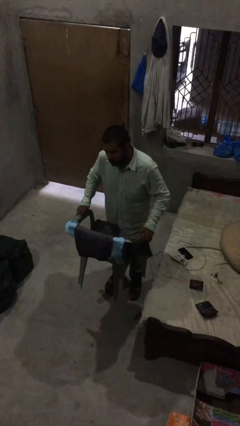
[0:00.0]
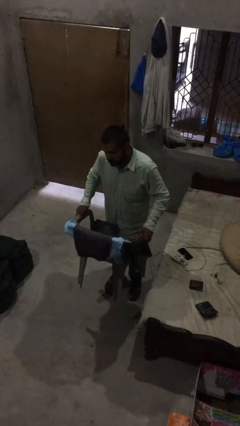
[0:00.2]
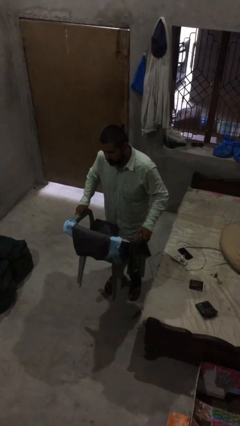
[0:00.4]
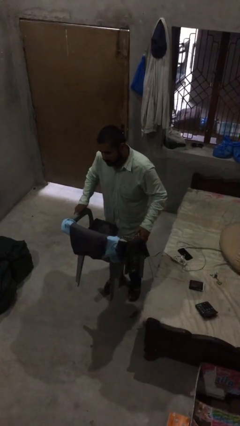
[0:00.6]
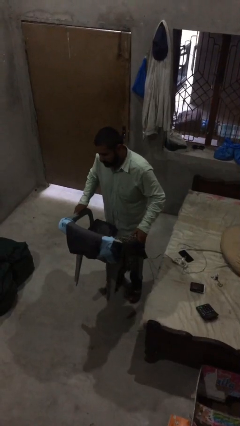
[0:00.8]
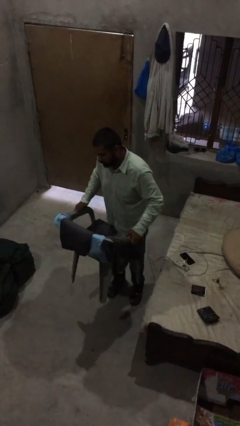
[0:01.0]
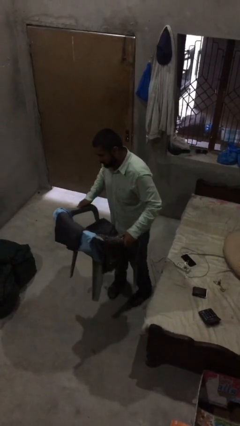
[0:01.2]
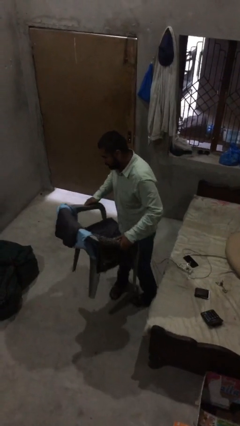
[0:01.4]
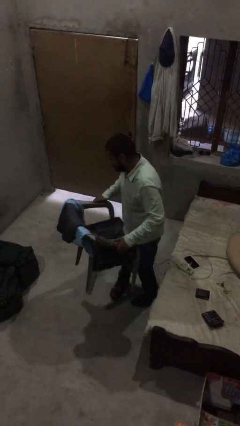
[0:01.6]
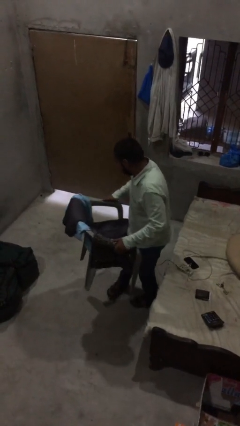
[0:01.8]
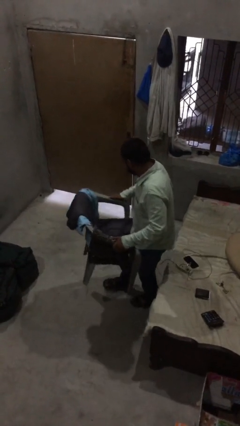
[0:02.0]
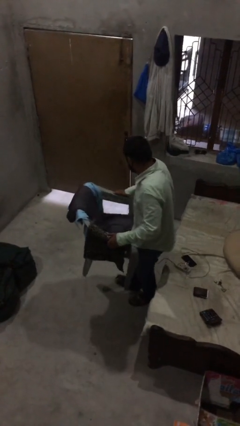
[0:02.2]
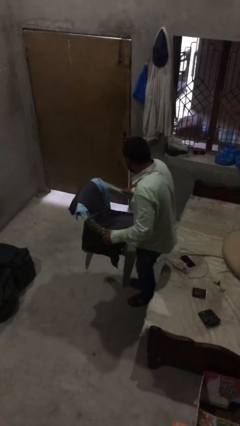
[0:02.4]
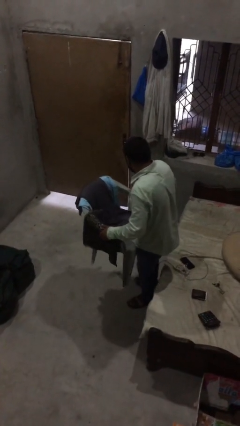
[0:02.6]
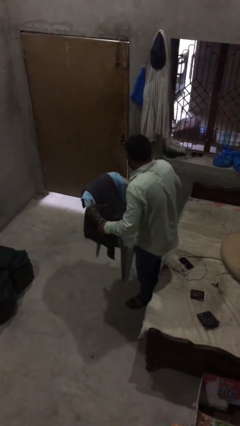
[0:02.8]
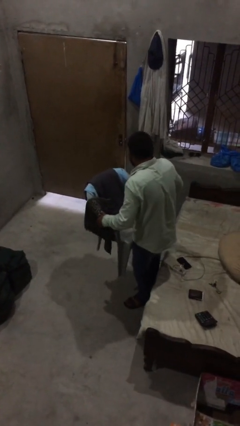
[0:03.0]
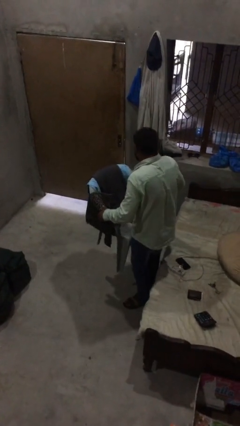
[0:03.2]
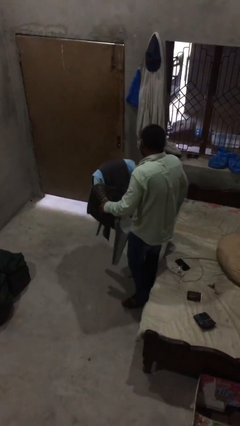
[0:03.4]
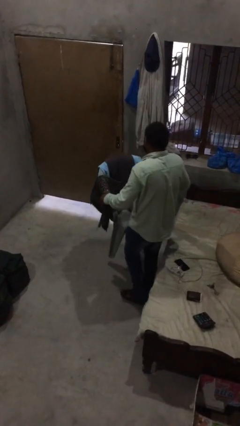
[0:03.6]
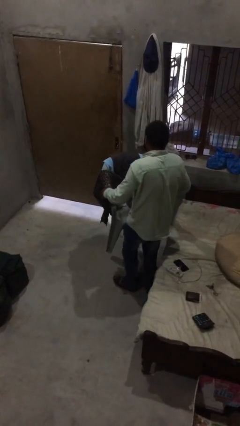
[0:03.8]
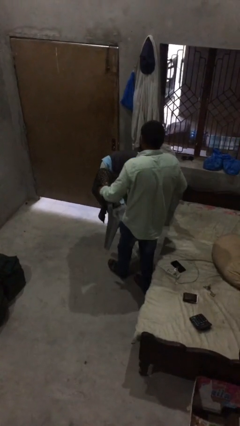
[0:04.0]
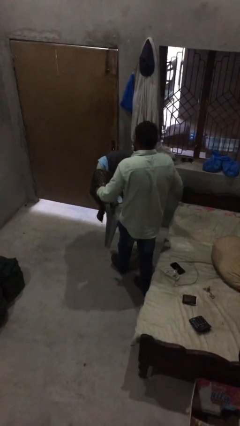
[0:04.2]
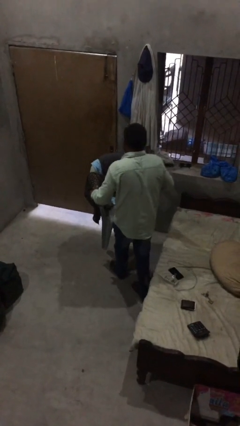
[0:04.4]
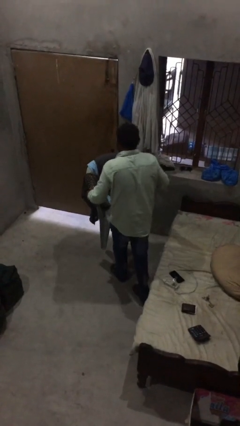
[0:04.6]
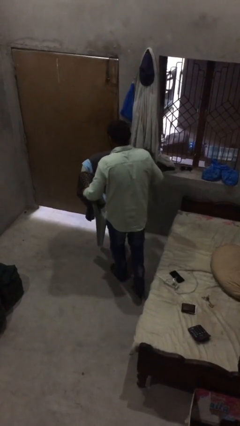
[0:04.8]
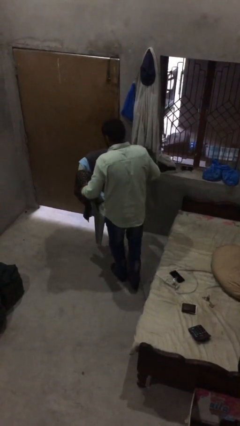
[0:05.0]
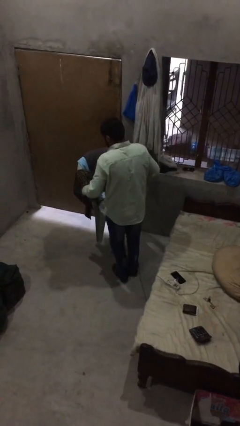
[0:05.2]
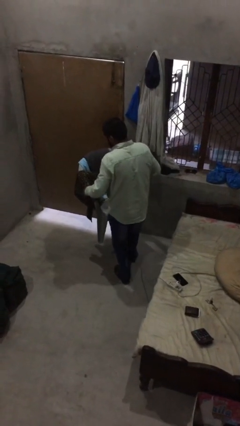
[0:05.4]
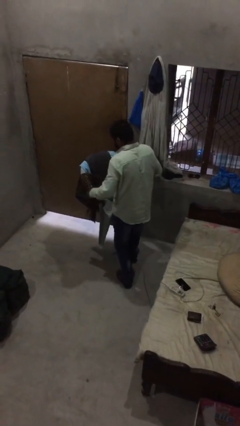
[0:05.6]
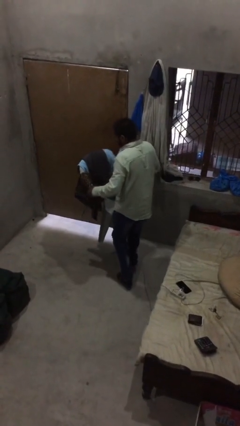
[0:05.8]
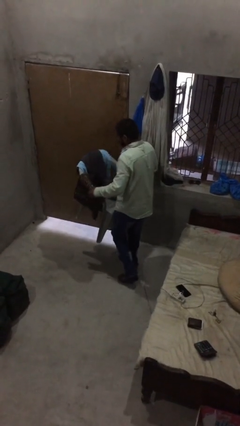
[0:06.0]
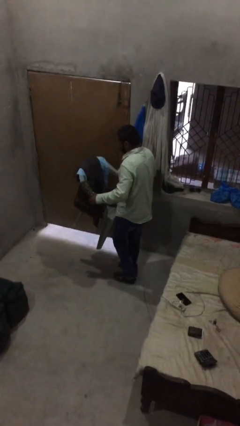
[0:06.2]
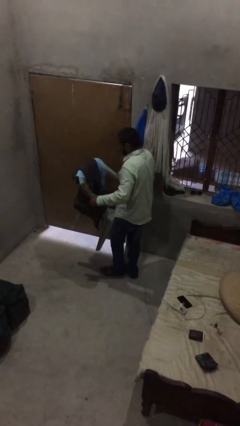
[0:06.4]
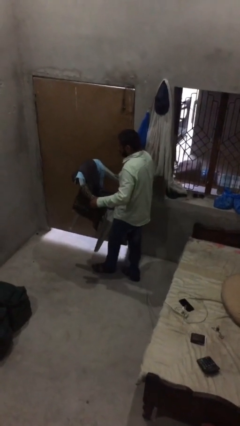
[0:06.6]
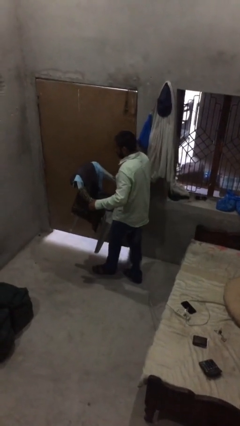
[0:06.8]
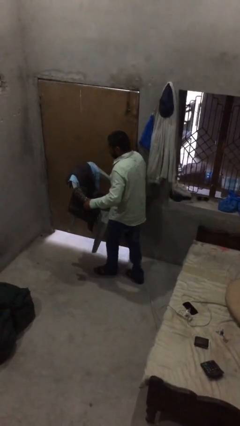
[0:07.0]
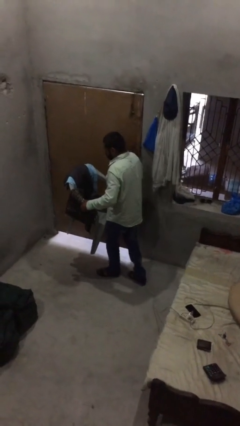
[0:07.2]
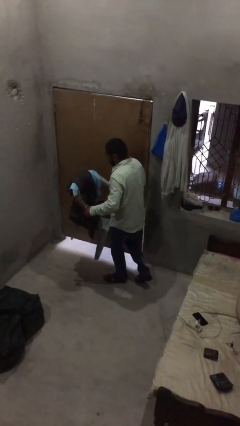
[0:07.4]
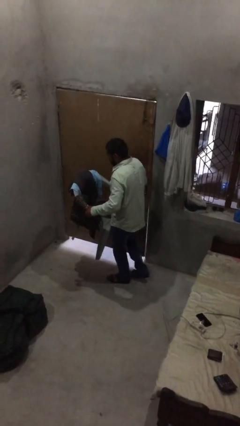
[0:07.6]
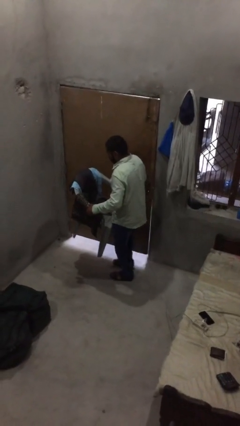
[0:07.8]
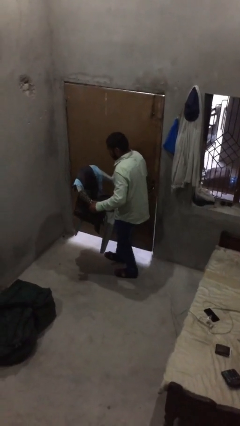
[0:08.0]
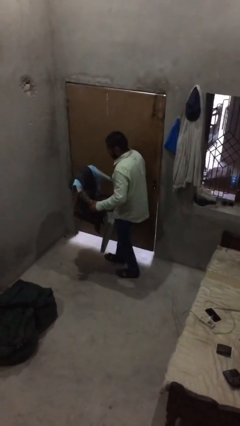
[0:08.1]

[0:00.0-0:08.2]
person carries heavy object

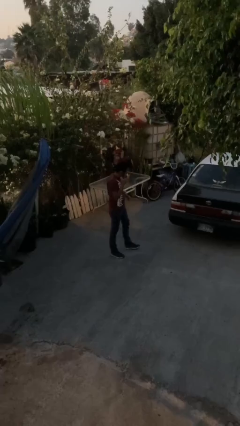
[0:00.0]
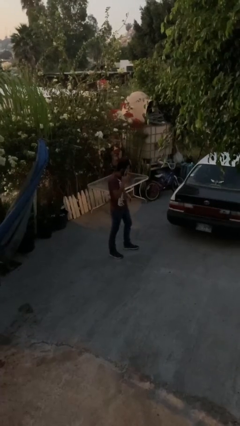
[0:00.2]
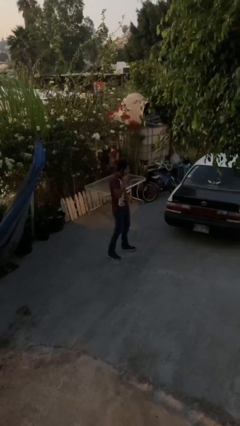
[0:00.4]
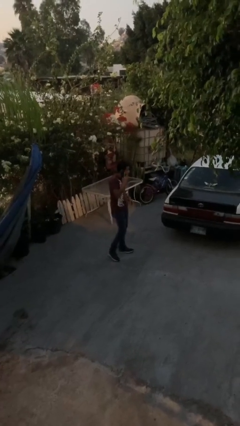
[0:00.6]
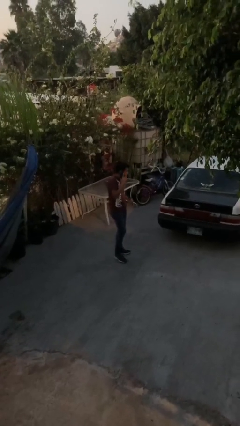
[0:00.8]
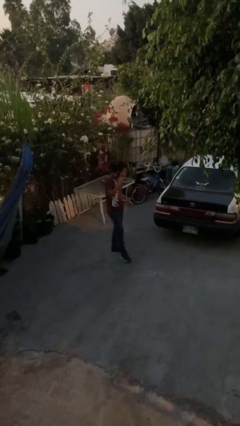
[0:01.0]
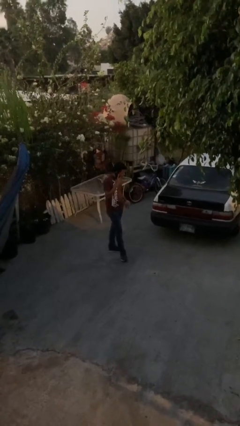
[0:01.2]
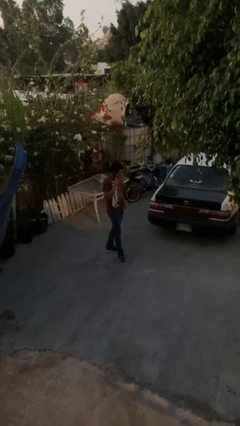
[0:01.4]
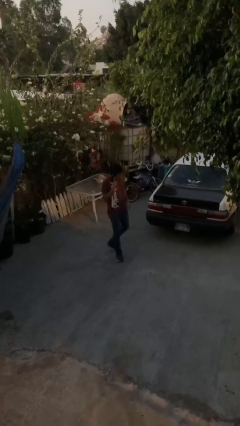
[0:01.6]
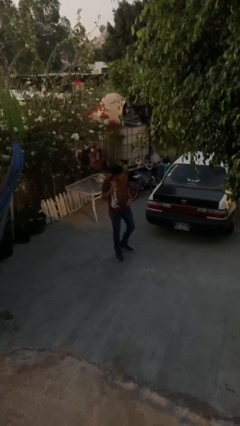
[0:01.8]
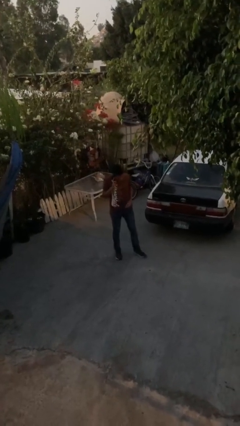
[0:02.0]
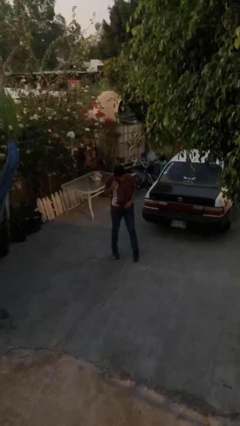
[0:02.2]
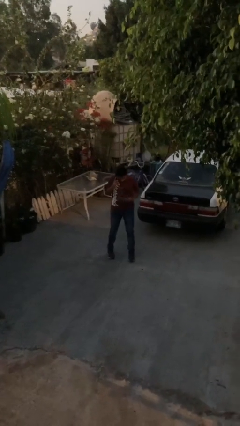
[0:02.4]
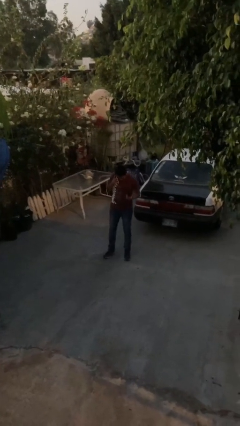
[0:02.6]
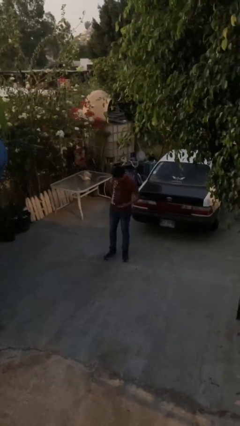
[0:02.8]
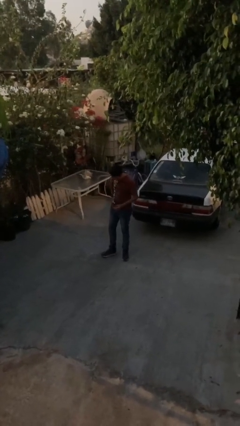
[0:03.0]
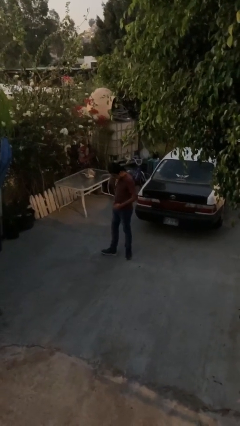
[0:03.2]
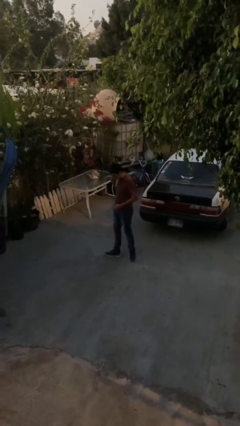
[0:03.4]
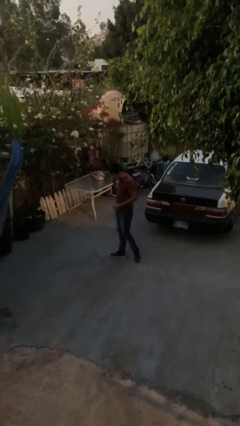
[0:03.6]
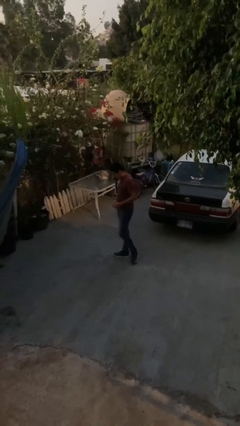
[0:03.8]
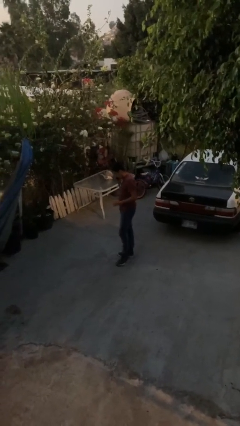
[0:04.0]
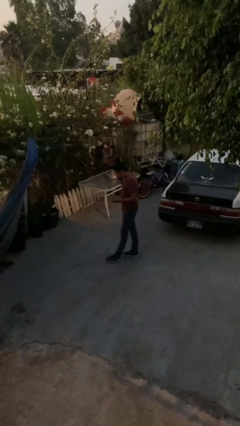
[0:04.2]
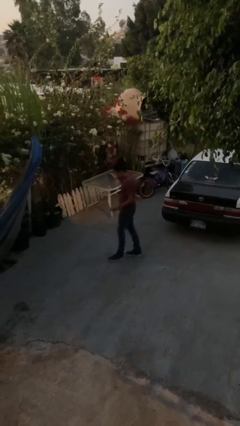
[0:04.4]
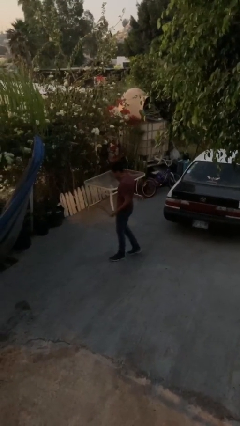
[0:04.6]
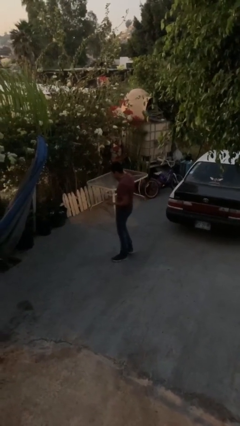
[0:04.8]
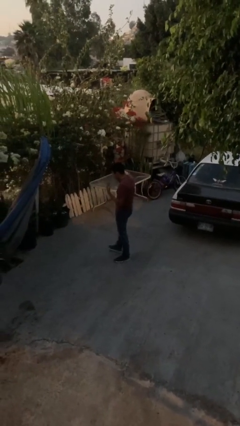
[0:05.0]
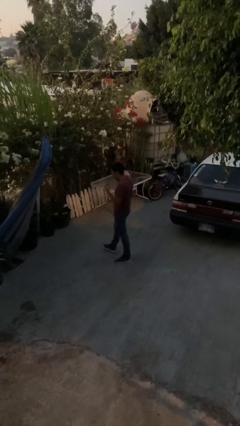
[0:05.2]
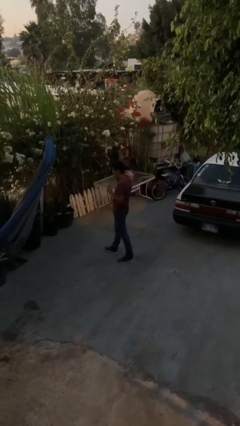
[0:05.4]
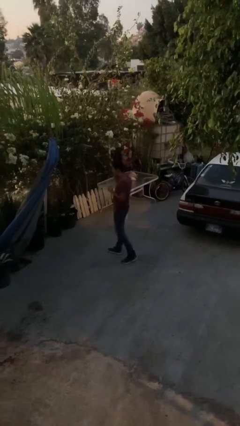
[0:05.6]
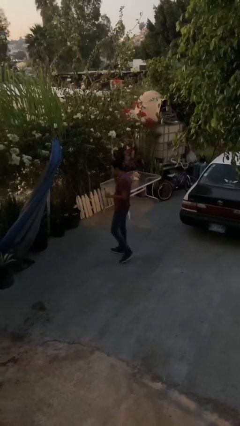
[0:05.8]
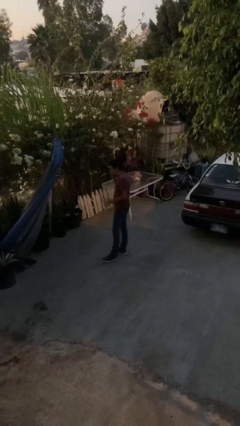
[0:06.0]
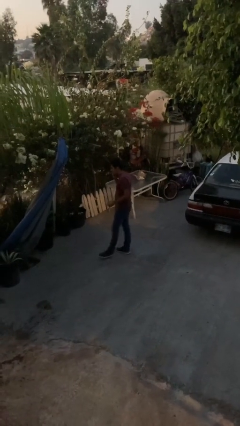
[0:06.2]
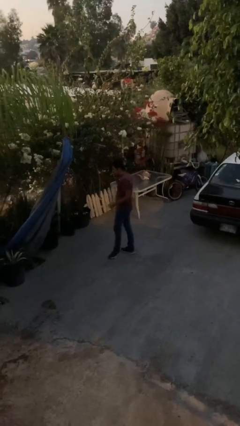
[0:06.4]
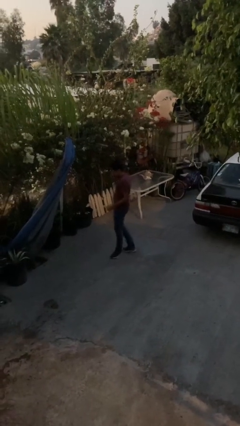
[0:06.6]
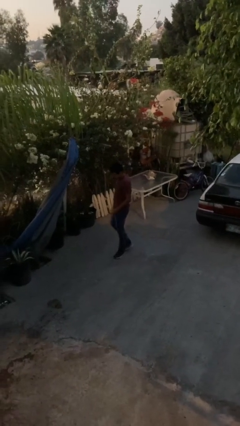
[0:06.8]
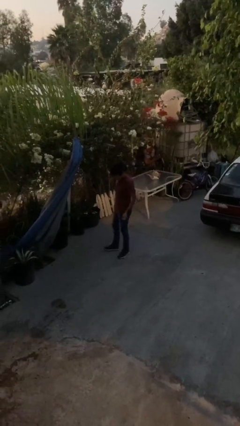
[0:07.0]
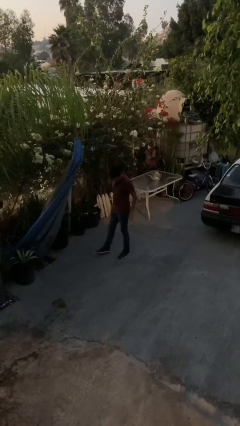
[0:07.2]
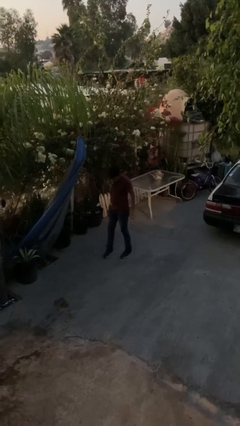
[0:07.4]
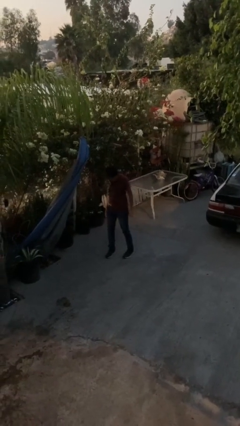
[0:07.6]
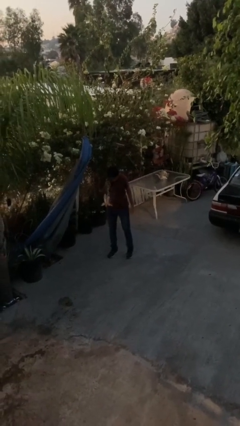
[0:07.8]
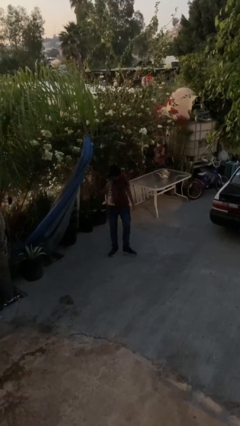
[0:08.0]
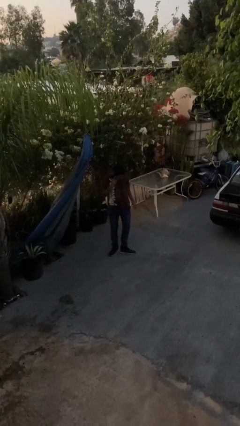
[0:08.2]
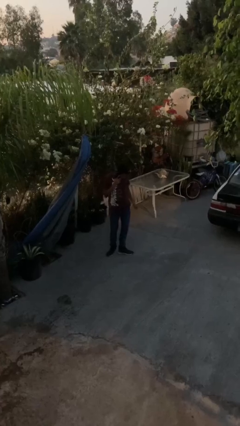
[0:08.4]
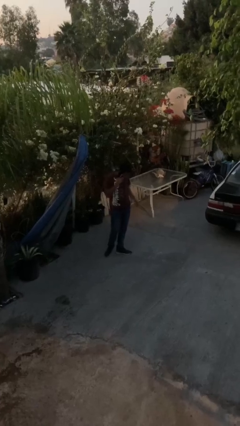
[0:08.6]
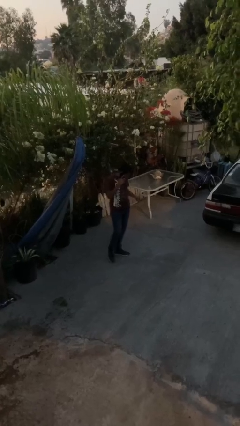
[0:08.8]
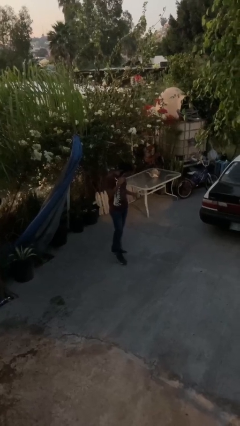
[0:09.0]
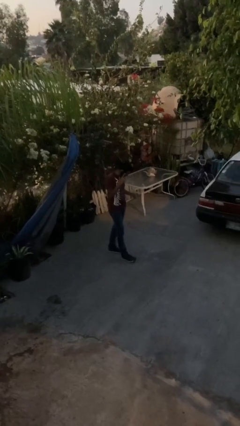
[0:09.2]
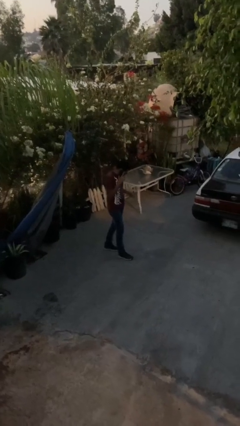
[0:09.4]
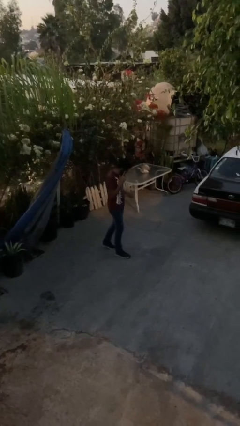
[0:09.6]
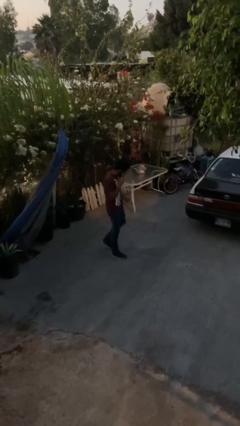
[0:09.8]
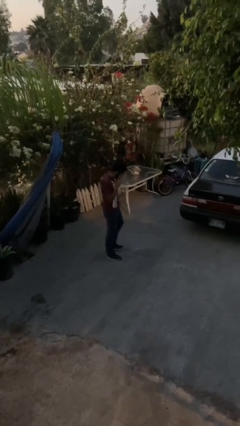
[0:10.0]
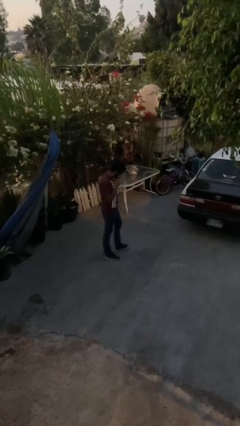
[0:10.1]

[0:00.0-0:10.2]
person talks on phone
